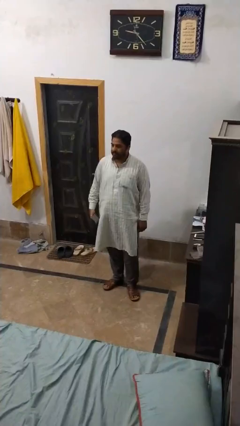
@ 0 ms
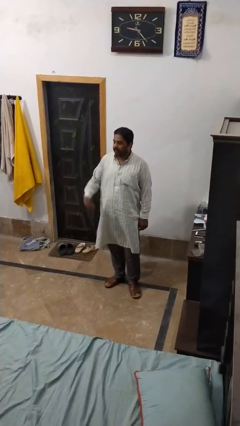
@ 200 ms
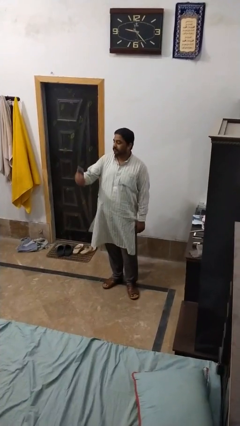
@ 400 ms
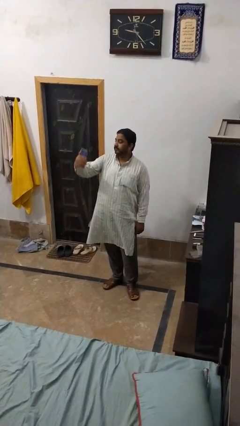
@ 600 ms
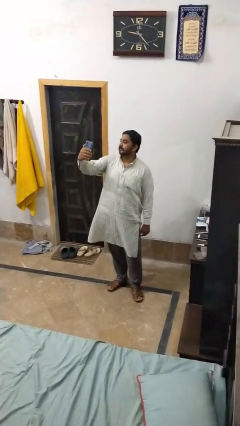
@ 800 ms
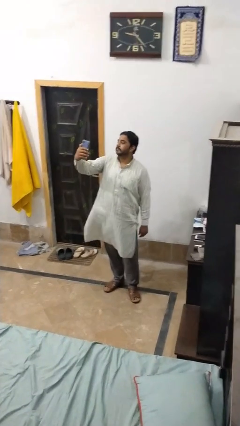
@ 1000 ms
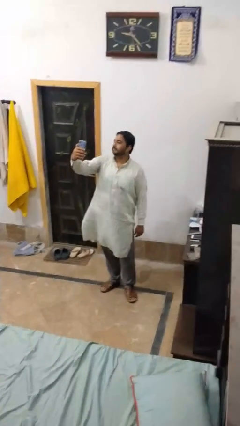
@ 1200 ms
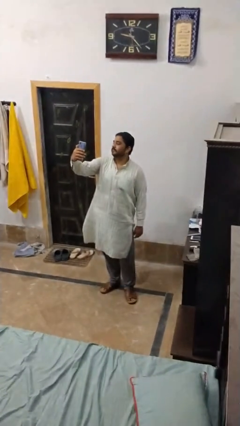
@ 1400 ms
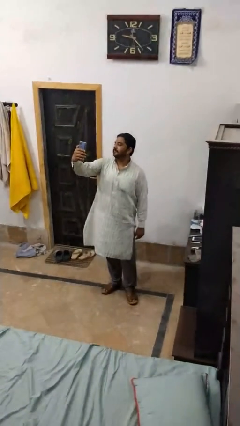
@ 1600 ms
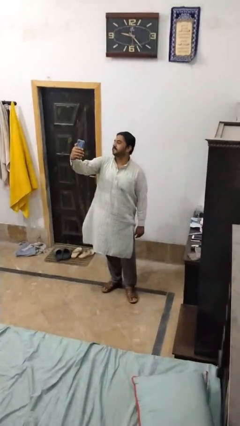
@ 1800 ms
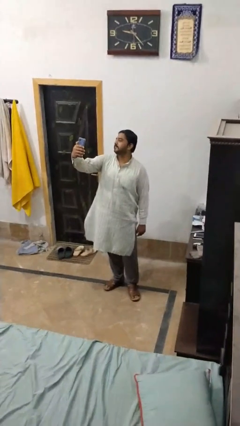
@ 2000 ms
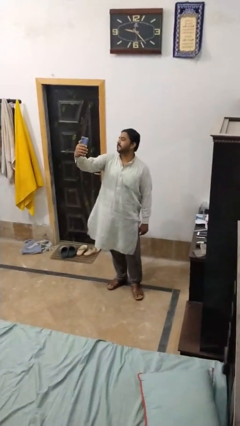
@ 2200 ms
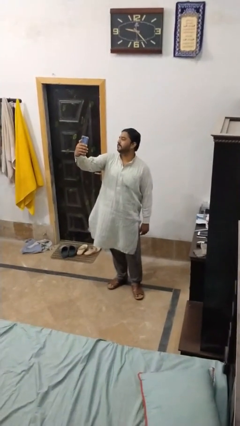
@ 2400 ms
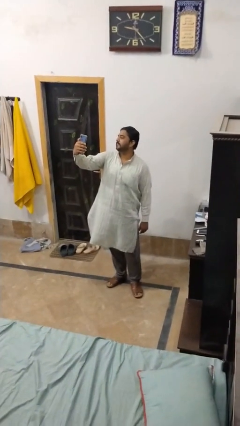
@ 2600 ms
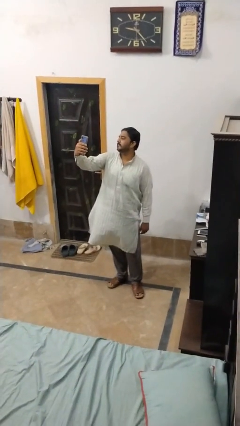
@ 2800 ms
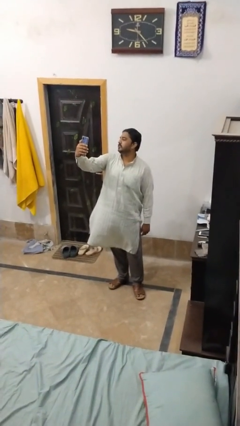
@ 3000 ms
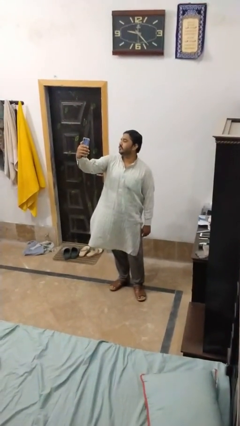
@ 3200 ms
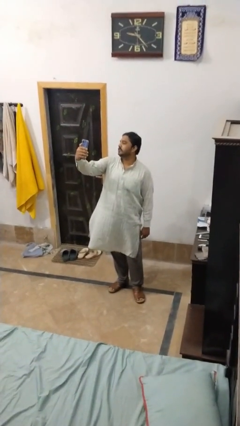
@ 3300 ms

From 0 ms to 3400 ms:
person takes selfie

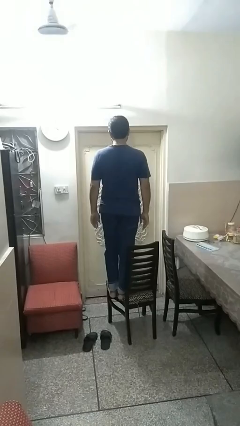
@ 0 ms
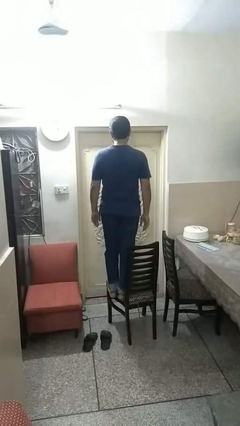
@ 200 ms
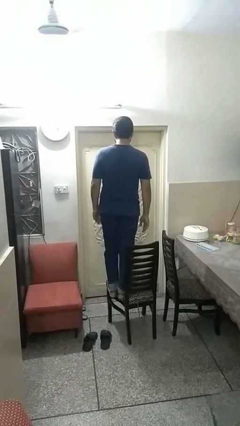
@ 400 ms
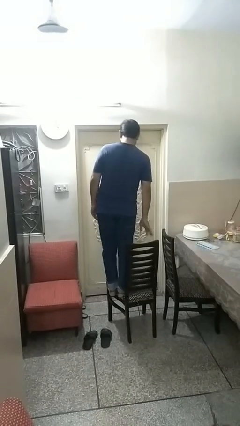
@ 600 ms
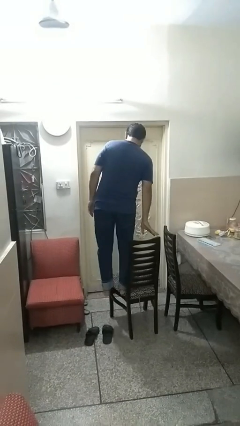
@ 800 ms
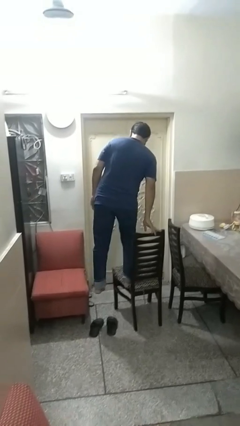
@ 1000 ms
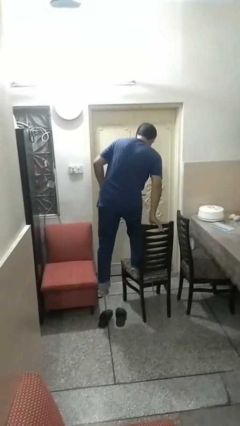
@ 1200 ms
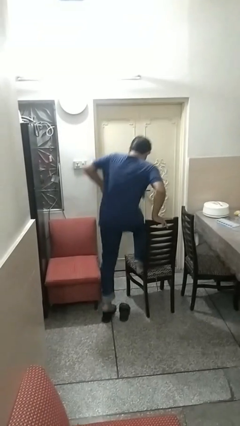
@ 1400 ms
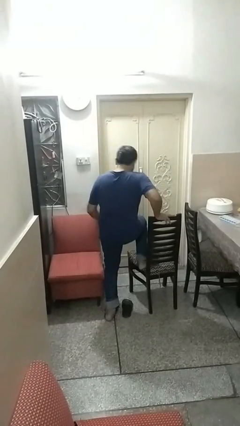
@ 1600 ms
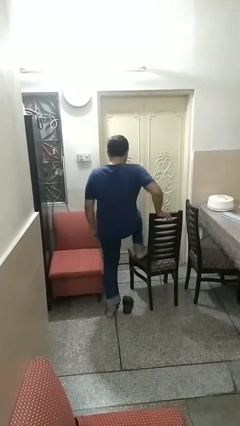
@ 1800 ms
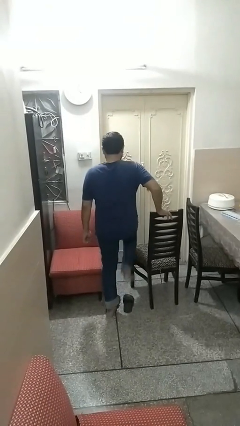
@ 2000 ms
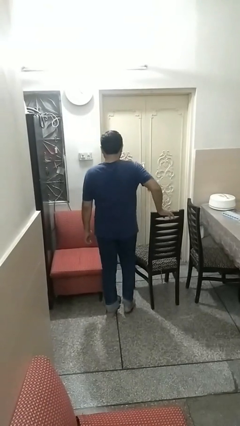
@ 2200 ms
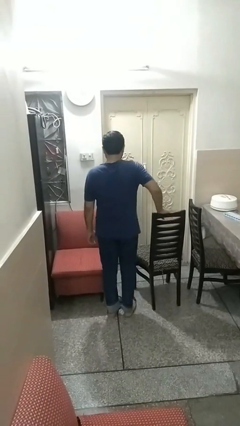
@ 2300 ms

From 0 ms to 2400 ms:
person climbs off chair

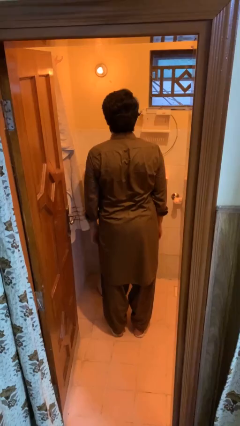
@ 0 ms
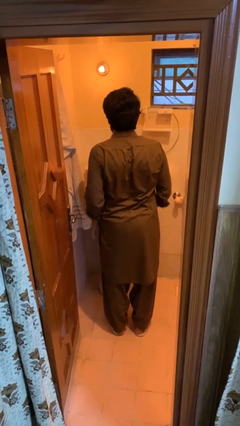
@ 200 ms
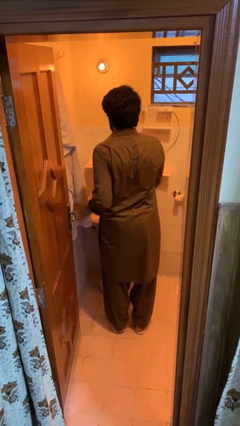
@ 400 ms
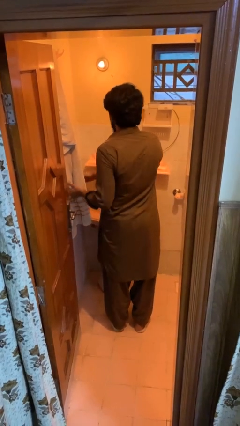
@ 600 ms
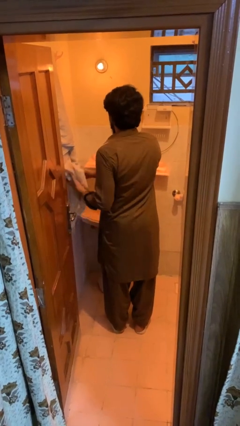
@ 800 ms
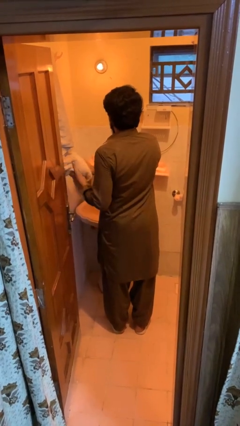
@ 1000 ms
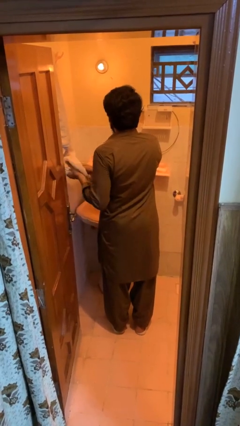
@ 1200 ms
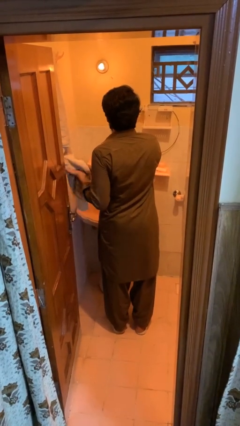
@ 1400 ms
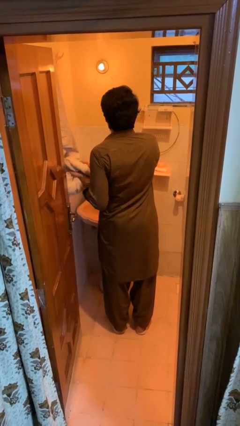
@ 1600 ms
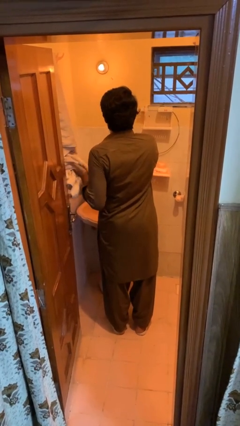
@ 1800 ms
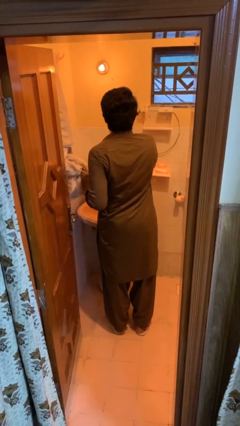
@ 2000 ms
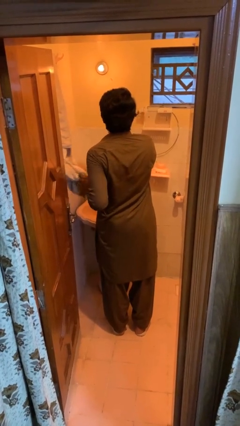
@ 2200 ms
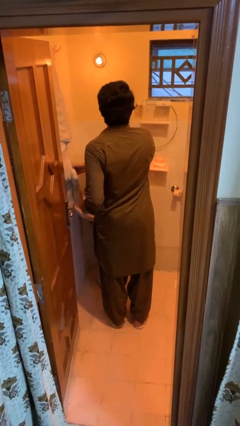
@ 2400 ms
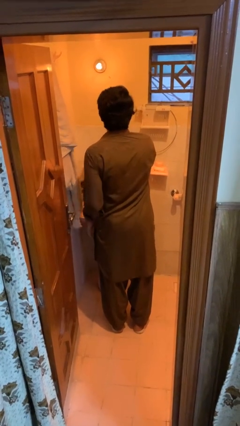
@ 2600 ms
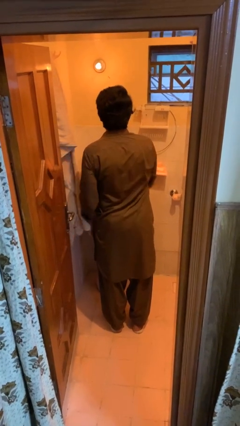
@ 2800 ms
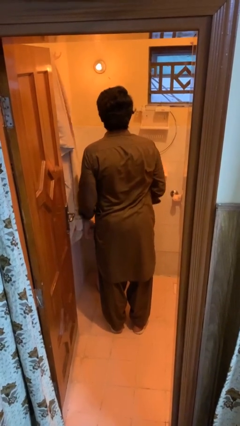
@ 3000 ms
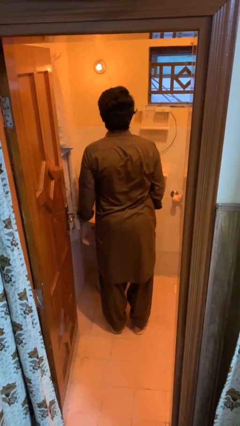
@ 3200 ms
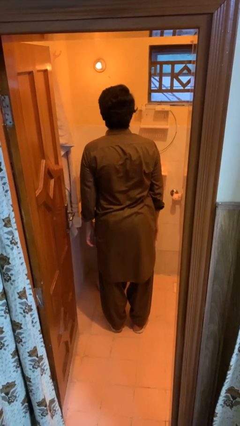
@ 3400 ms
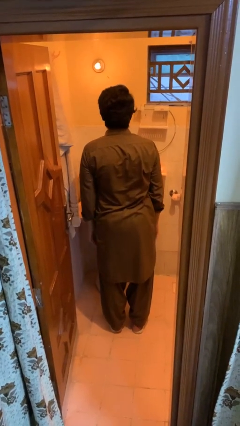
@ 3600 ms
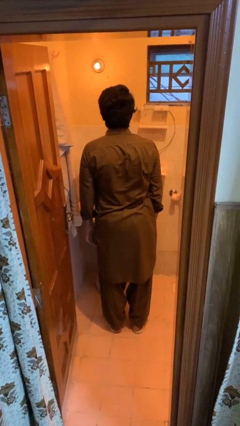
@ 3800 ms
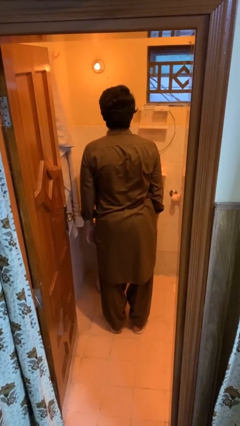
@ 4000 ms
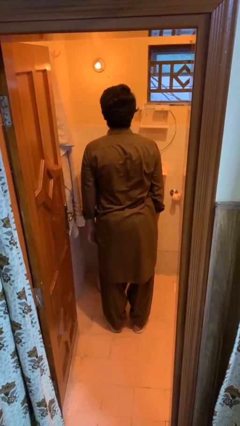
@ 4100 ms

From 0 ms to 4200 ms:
person dries hands with towel

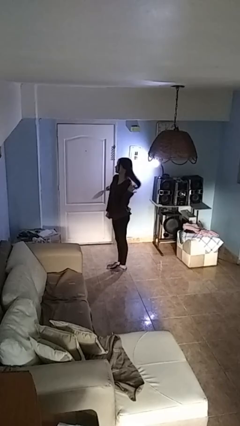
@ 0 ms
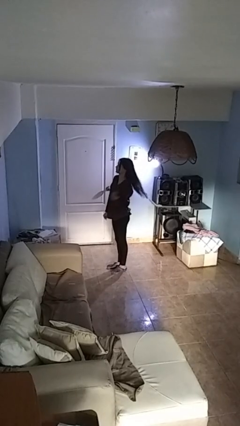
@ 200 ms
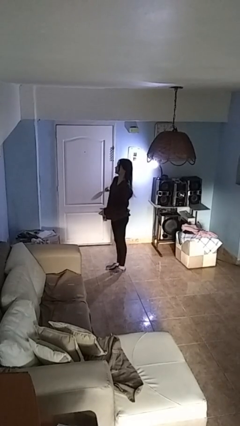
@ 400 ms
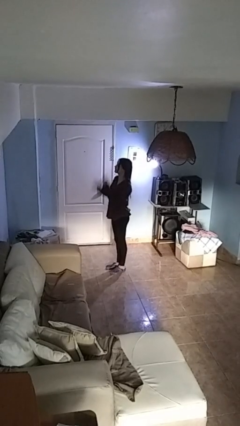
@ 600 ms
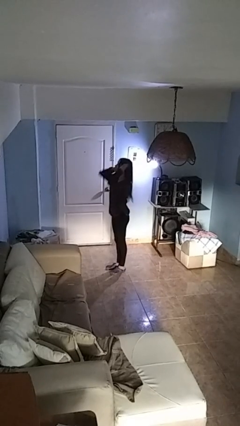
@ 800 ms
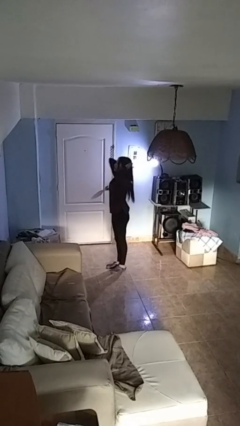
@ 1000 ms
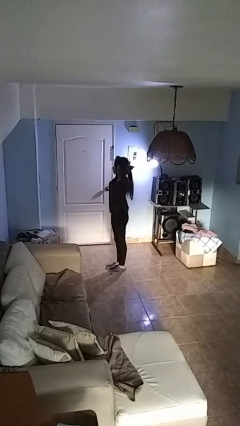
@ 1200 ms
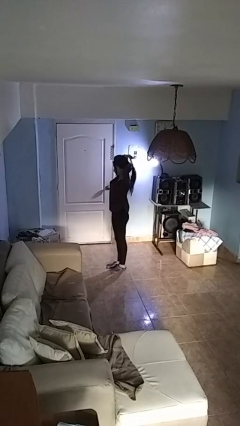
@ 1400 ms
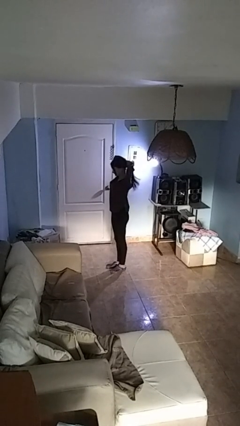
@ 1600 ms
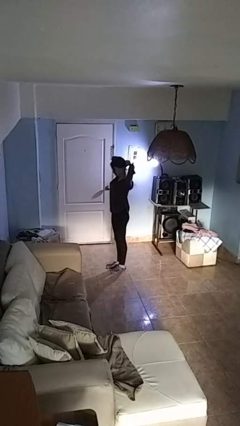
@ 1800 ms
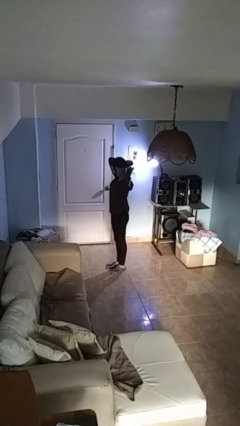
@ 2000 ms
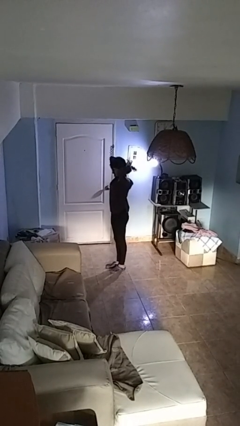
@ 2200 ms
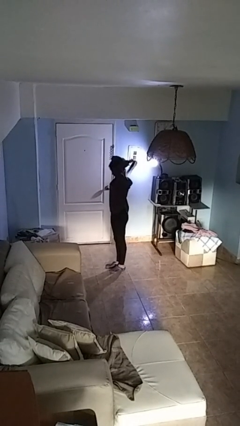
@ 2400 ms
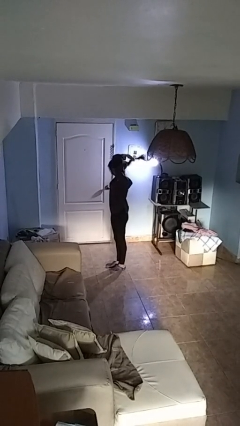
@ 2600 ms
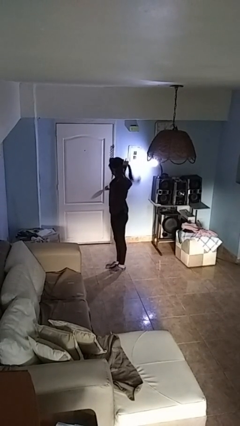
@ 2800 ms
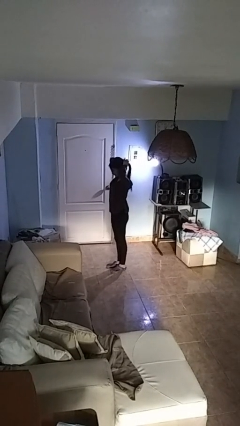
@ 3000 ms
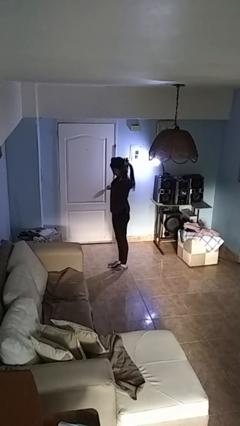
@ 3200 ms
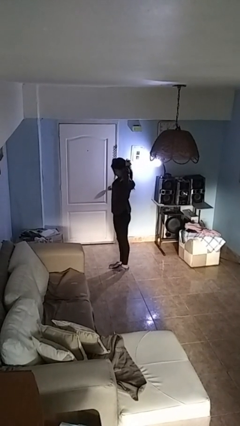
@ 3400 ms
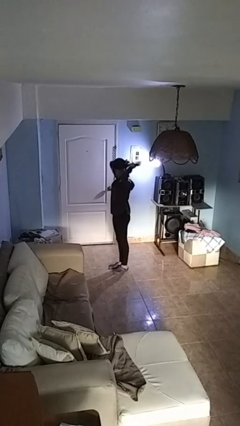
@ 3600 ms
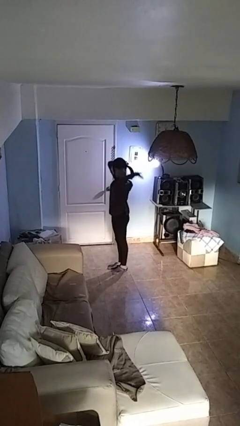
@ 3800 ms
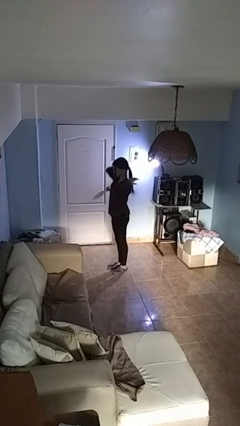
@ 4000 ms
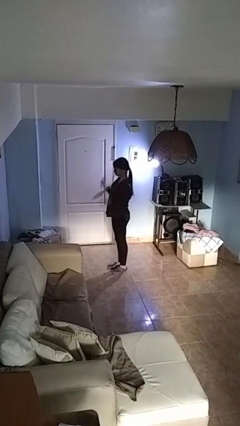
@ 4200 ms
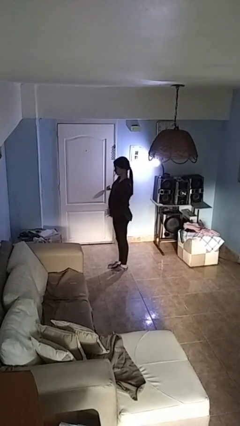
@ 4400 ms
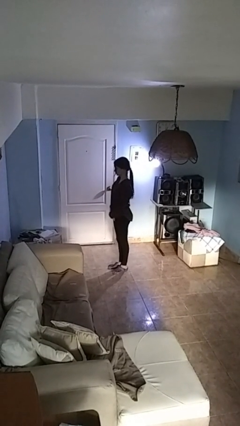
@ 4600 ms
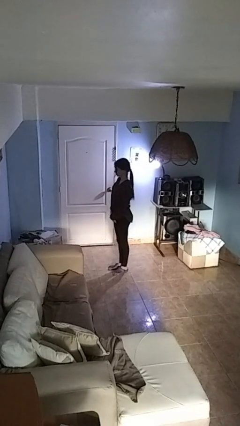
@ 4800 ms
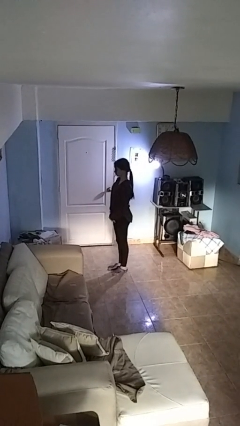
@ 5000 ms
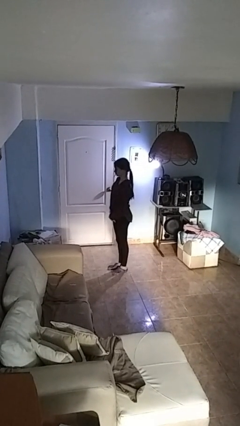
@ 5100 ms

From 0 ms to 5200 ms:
person puts hair in ponytail

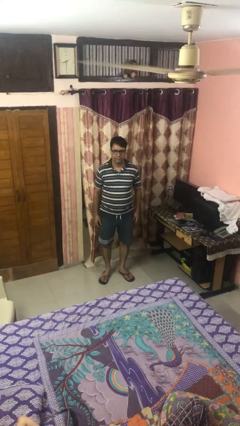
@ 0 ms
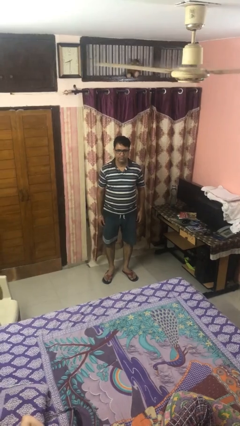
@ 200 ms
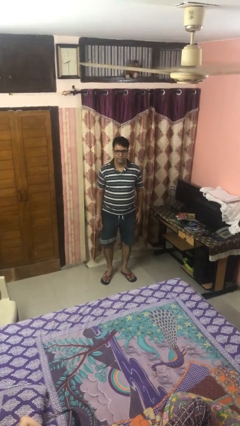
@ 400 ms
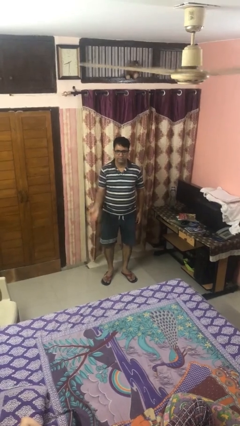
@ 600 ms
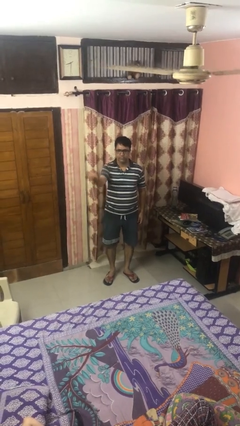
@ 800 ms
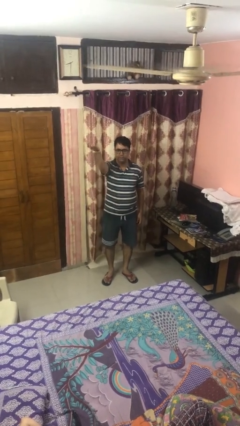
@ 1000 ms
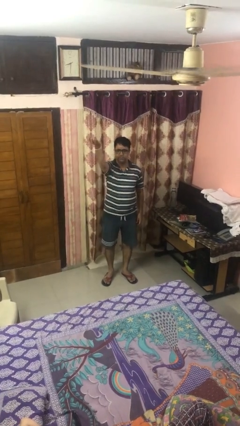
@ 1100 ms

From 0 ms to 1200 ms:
person gestures swipe up

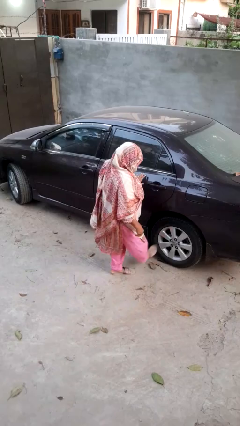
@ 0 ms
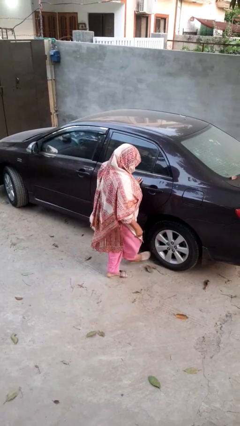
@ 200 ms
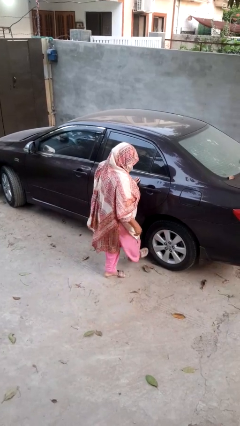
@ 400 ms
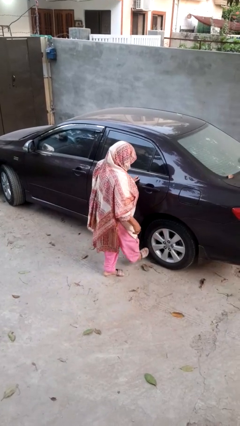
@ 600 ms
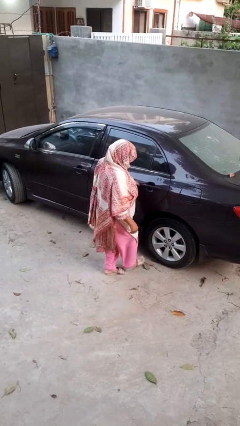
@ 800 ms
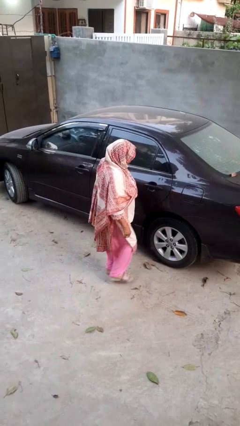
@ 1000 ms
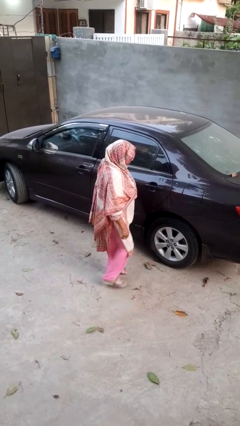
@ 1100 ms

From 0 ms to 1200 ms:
person kicks car tires
